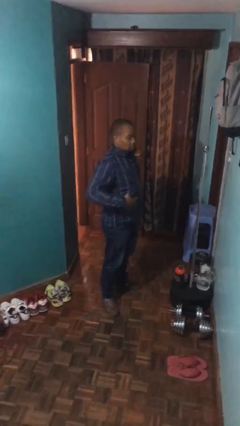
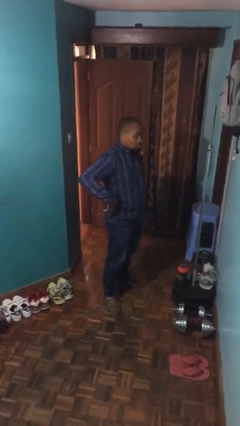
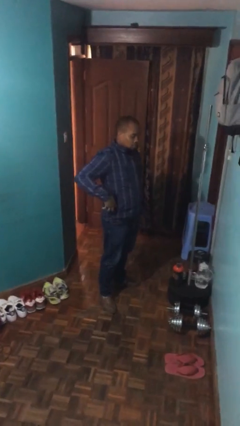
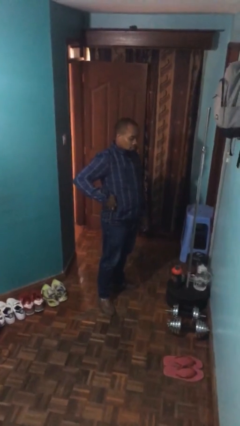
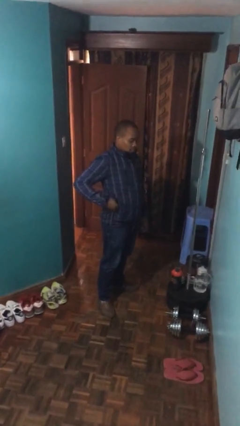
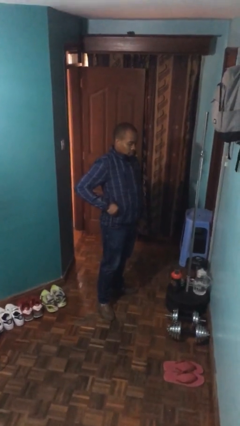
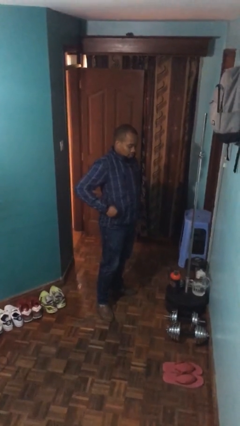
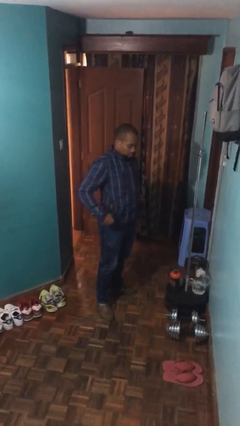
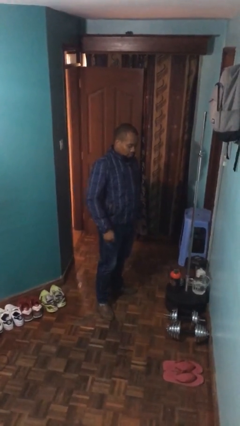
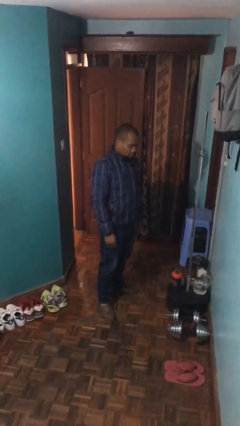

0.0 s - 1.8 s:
person puts phone into pocket

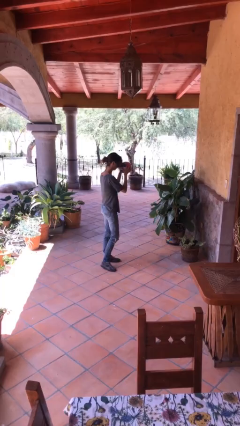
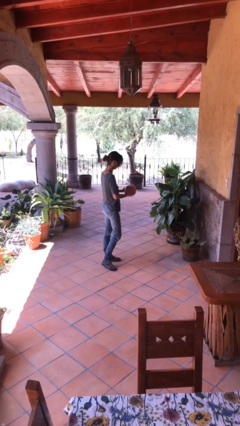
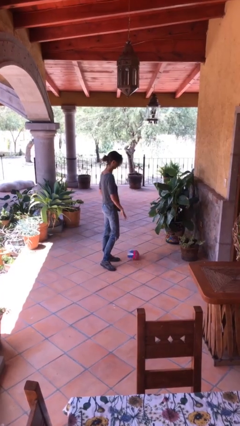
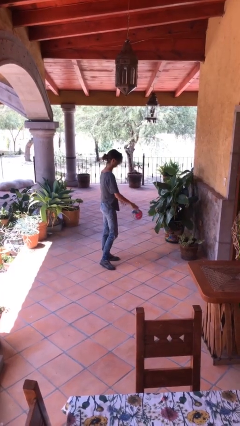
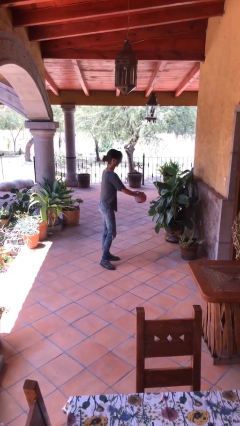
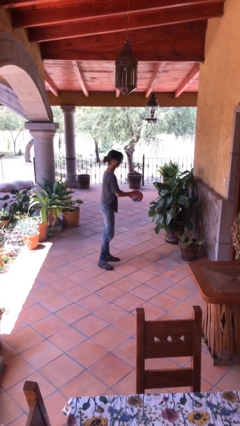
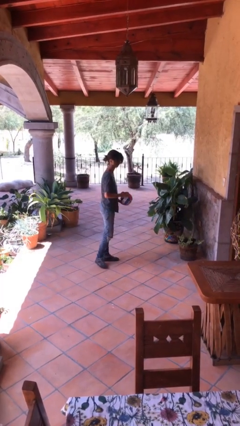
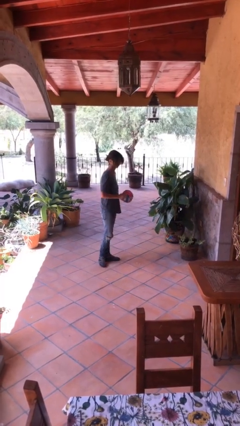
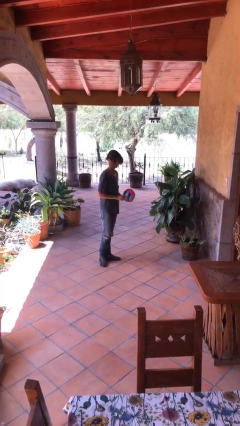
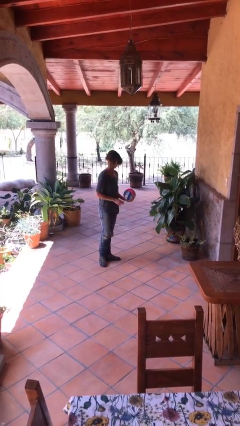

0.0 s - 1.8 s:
person bounces ball on floor

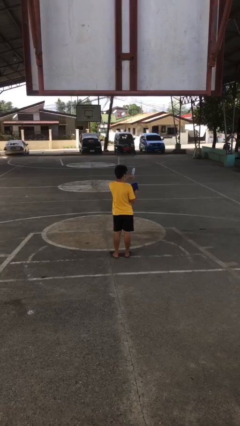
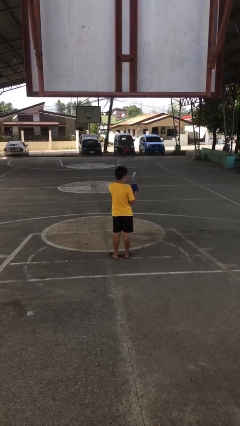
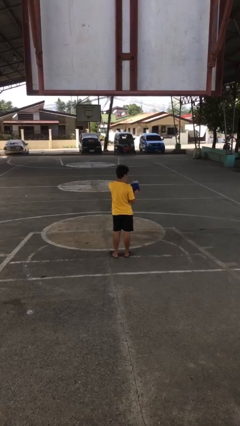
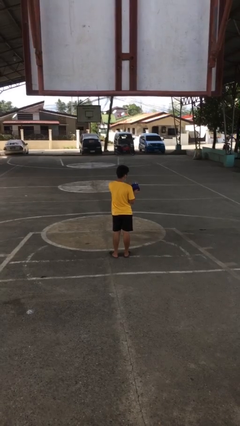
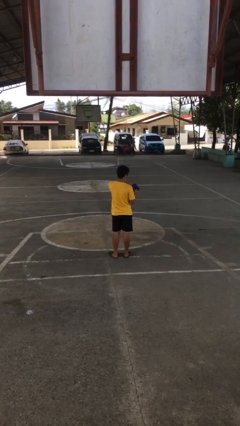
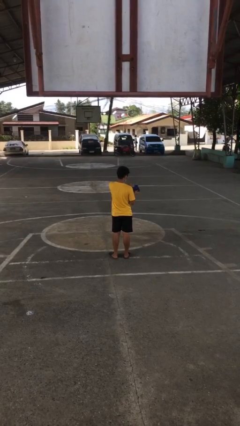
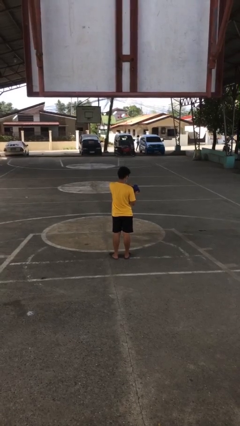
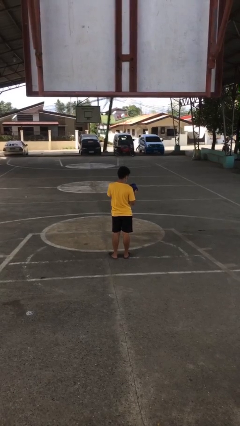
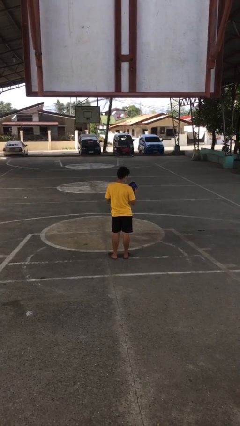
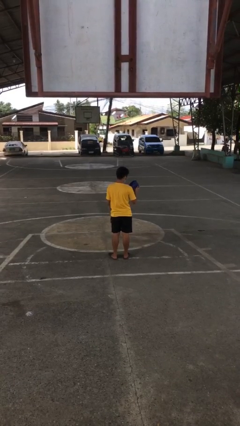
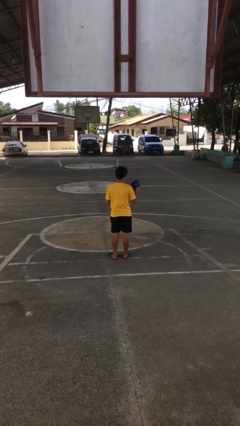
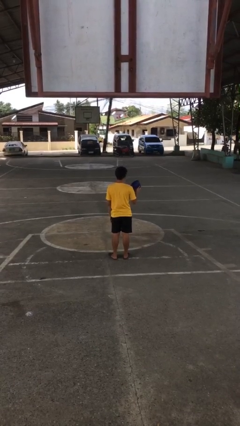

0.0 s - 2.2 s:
person puts object into purse

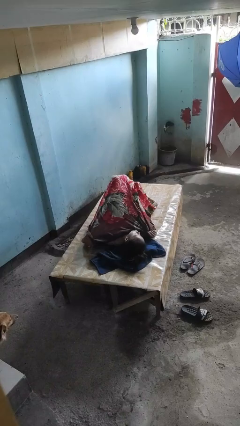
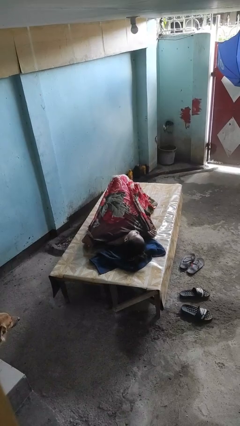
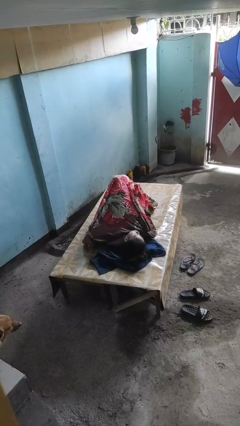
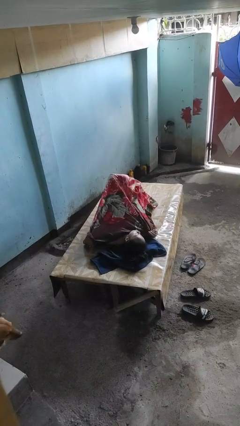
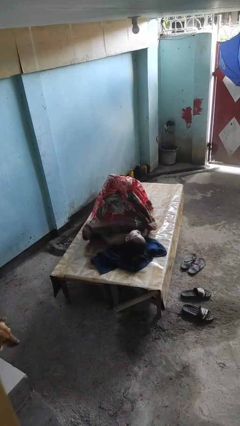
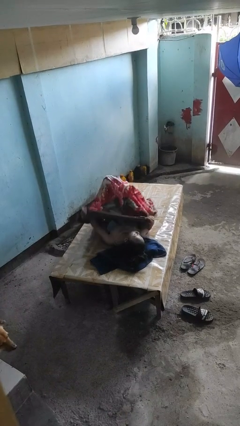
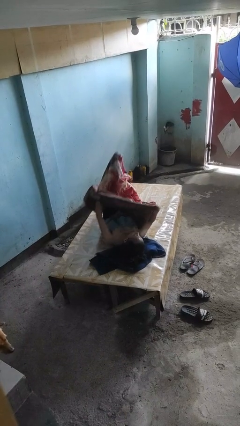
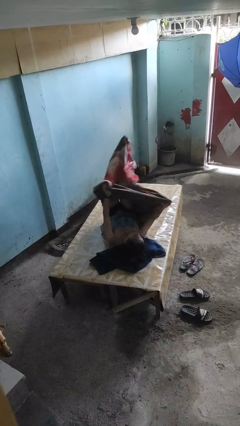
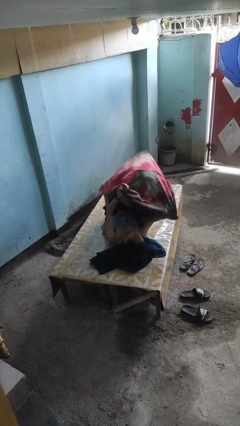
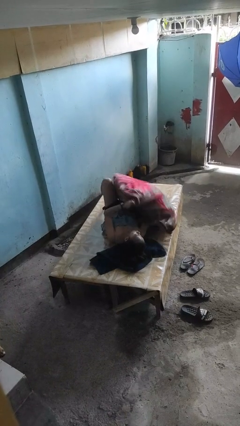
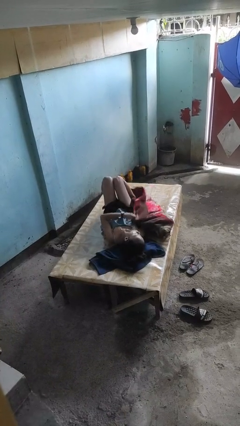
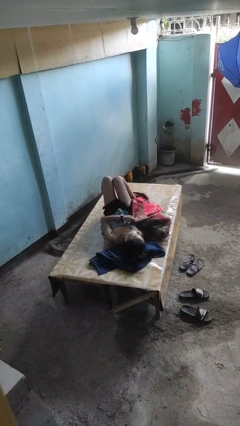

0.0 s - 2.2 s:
person uncovers with blanket

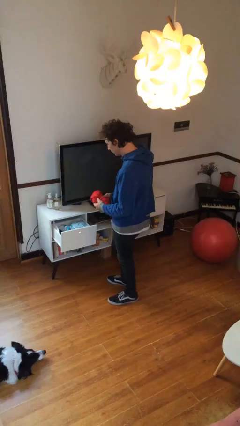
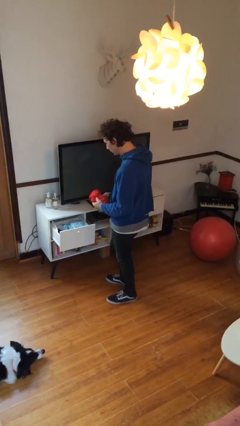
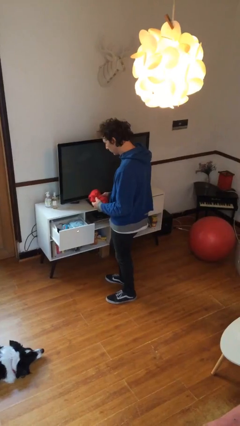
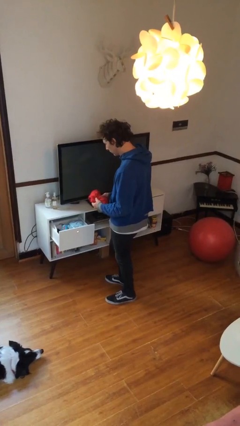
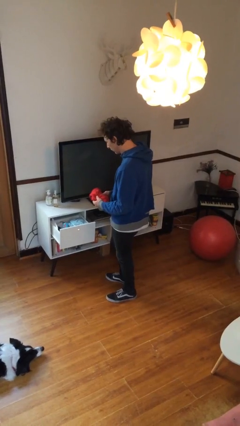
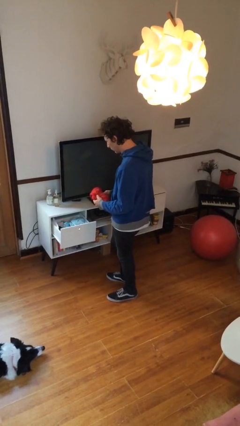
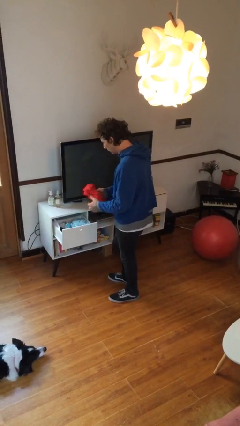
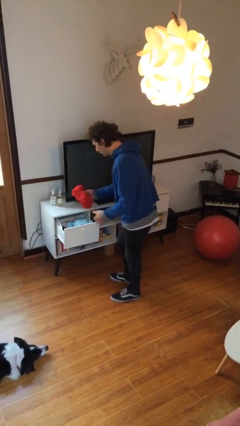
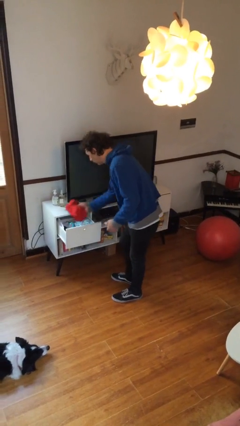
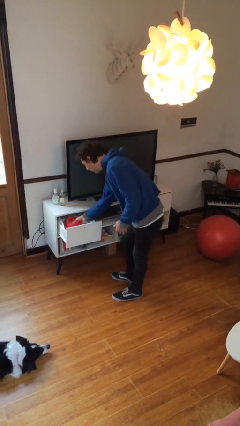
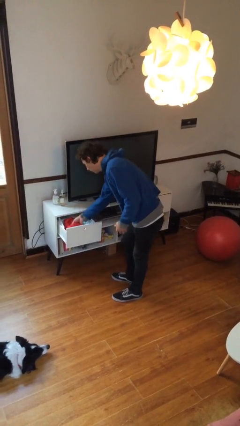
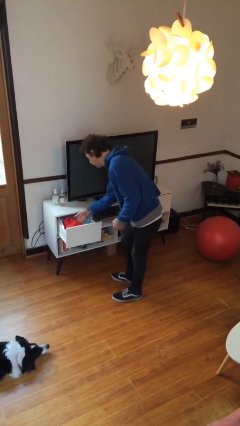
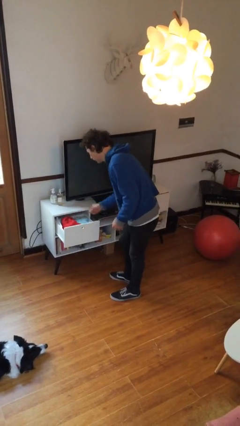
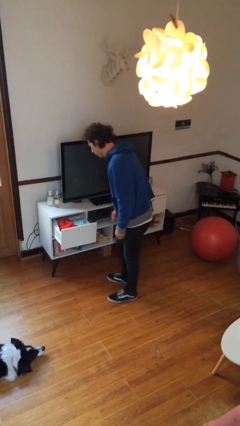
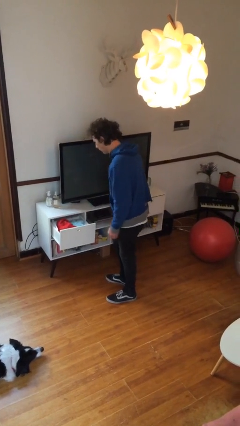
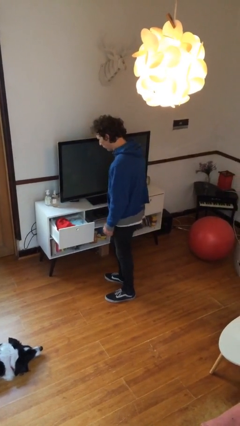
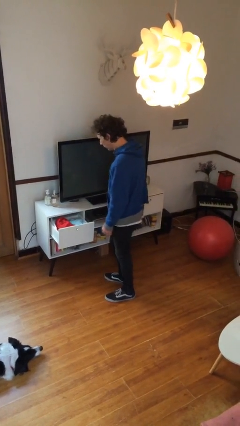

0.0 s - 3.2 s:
person puts clothes into dresser

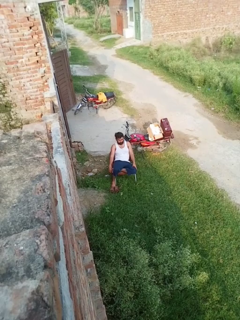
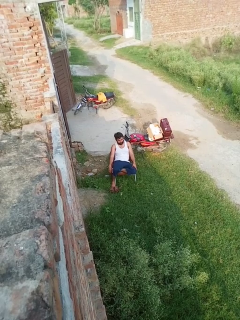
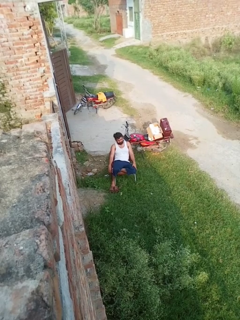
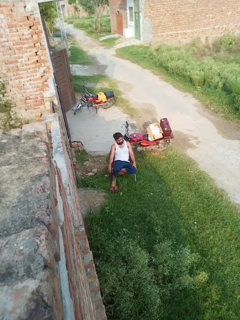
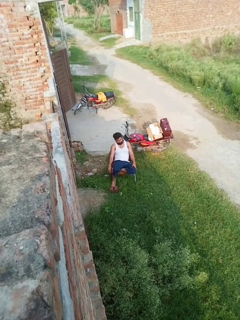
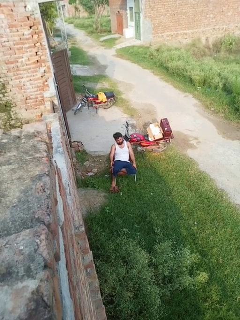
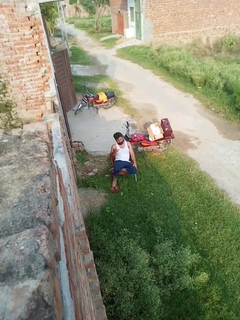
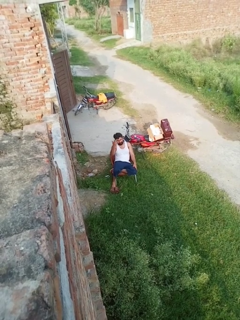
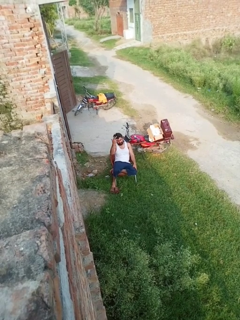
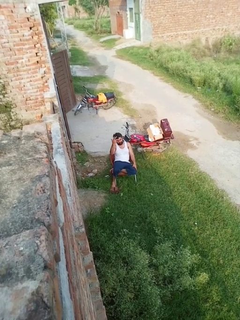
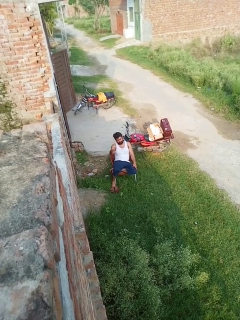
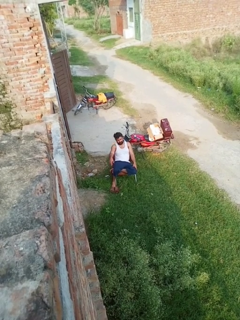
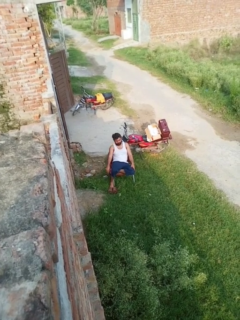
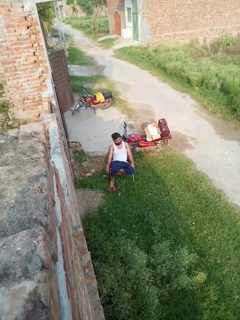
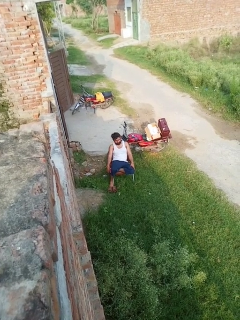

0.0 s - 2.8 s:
person gestures raise hand

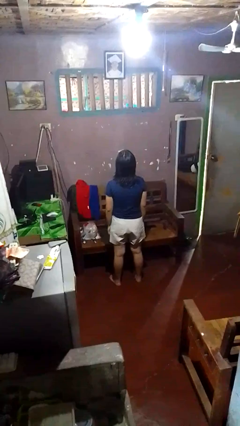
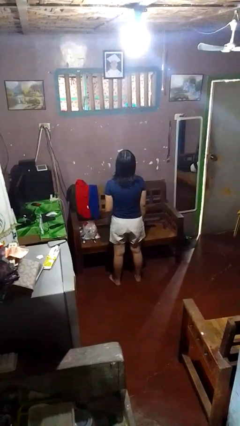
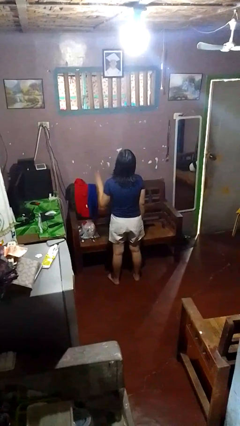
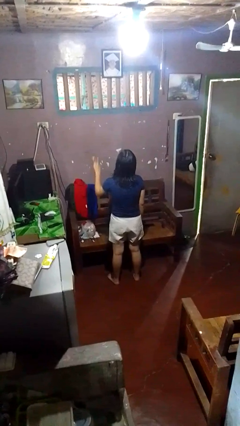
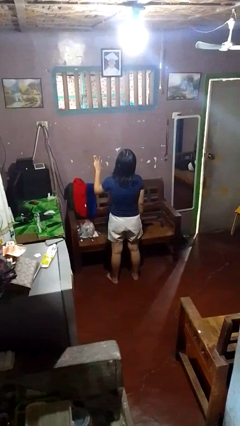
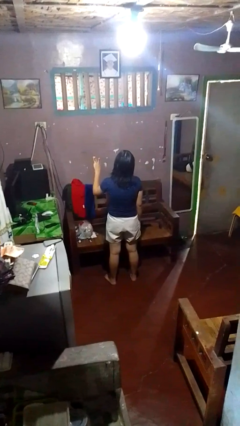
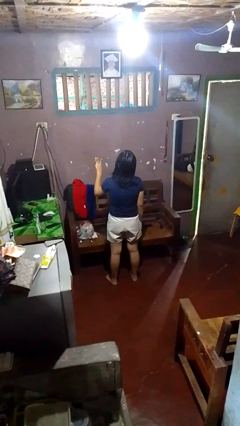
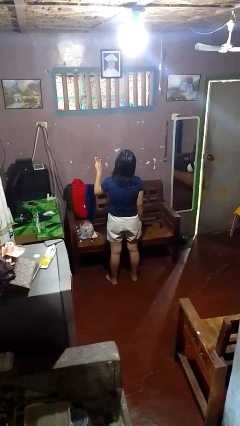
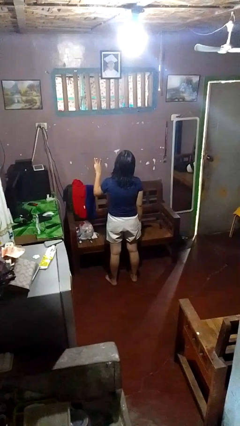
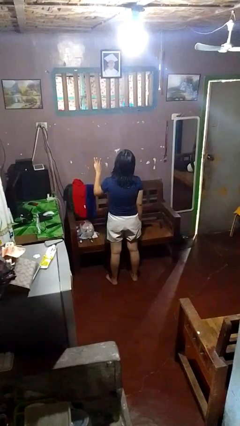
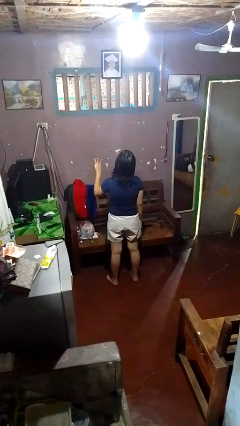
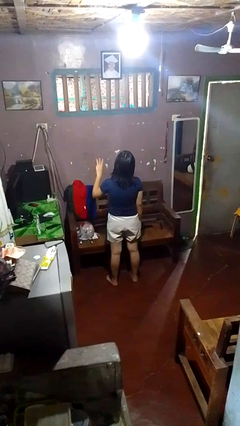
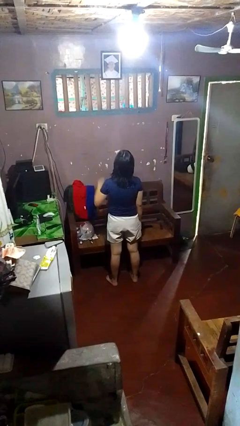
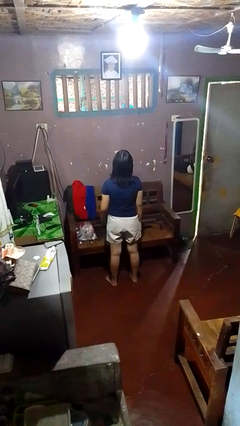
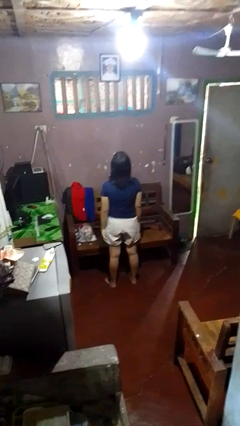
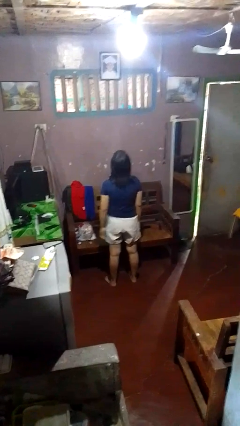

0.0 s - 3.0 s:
person gestures number three

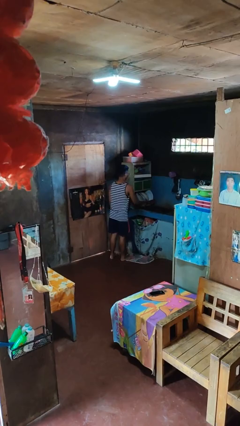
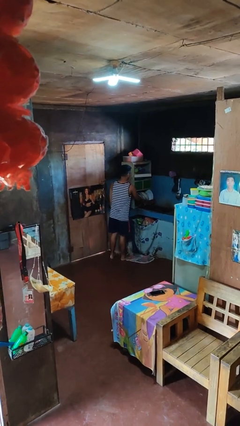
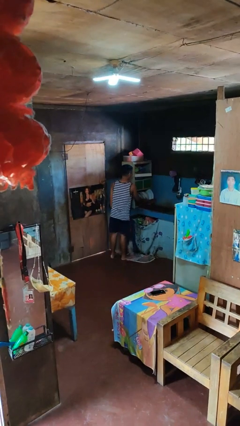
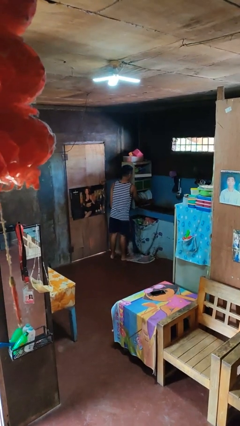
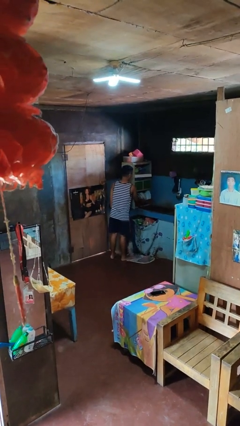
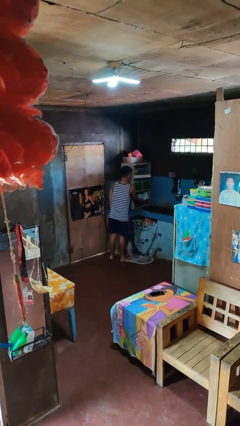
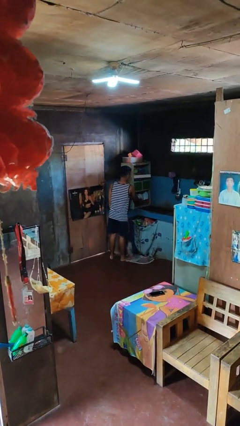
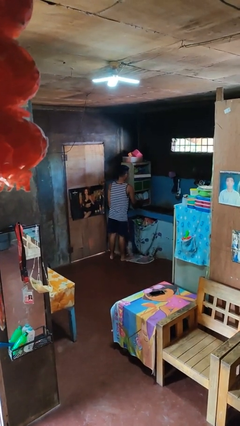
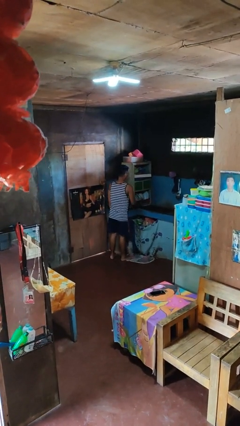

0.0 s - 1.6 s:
person closes dishwasher
